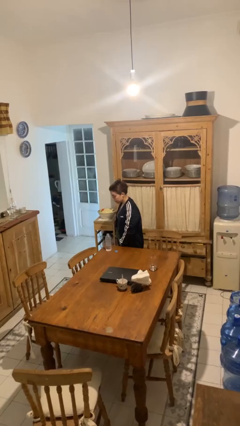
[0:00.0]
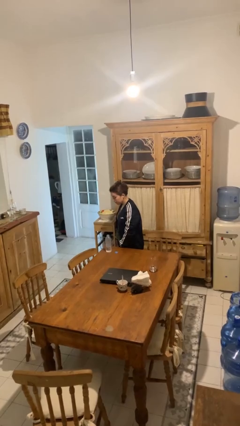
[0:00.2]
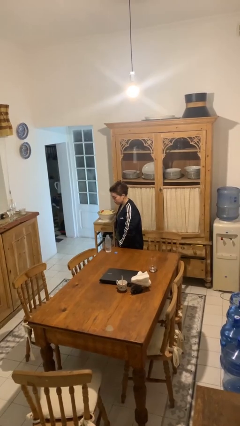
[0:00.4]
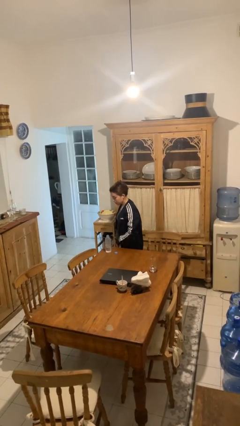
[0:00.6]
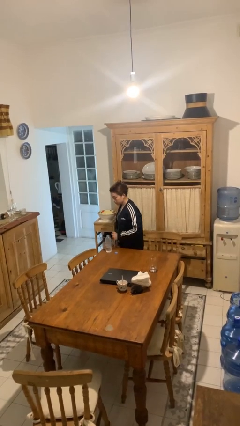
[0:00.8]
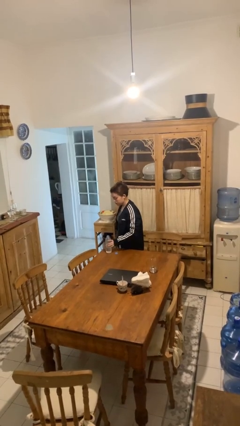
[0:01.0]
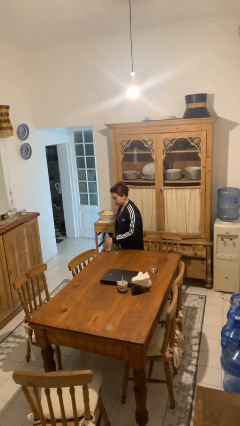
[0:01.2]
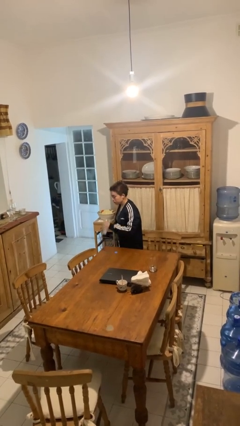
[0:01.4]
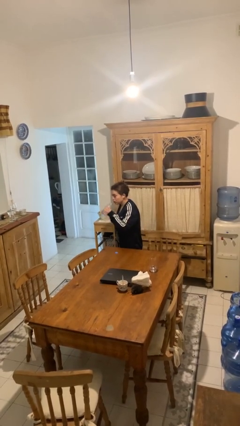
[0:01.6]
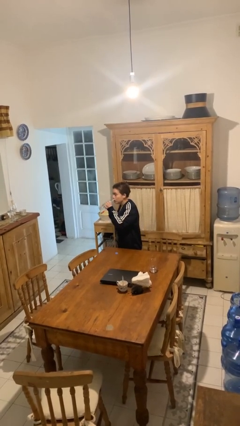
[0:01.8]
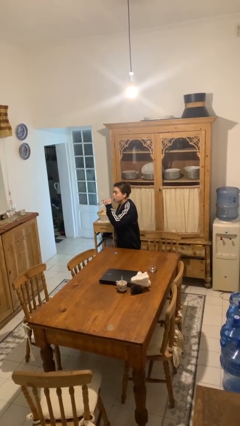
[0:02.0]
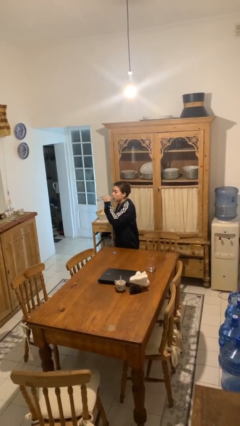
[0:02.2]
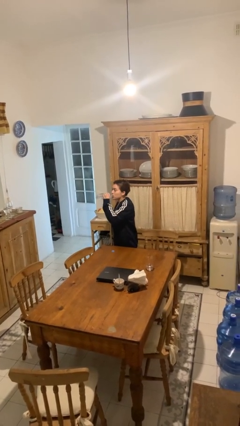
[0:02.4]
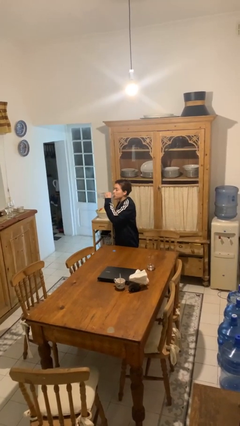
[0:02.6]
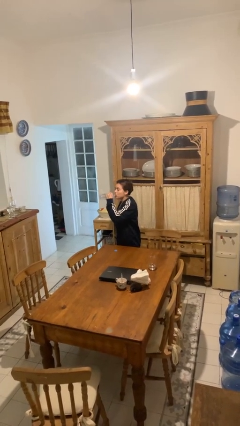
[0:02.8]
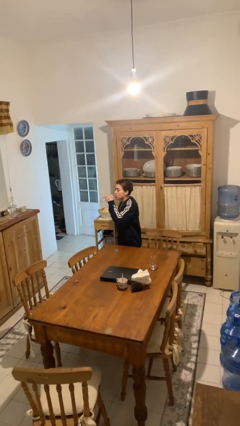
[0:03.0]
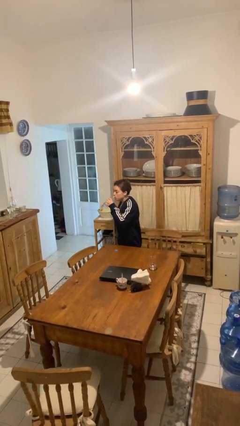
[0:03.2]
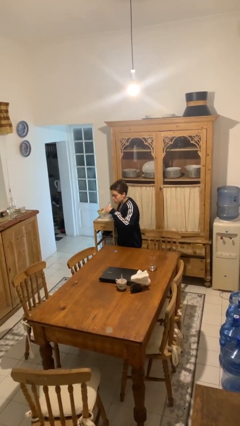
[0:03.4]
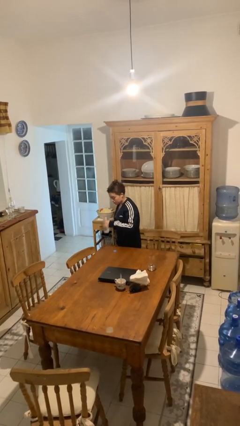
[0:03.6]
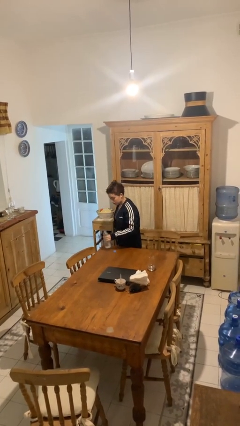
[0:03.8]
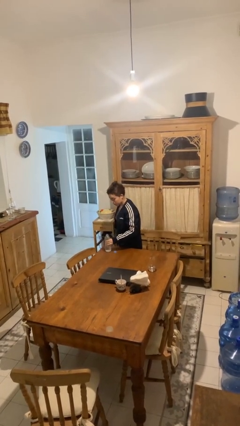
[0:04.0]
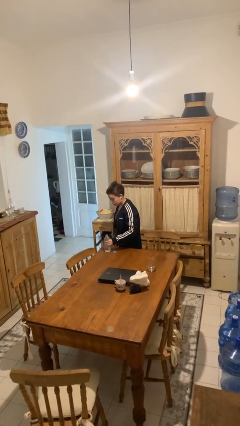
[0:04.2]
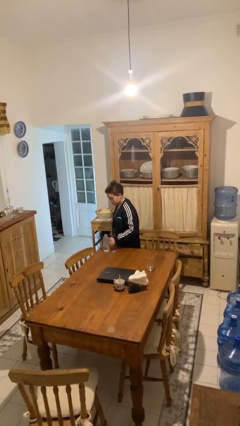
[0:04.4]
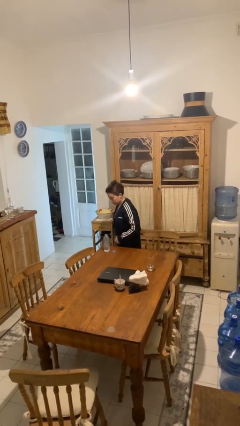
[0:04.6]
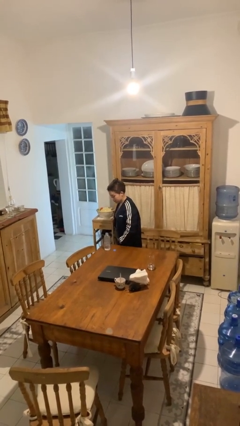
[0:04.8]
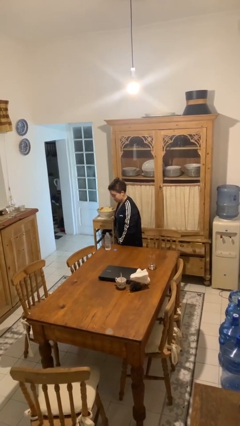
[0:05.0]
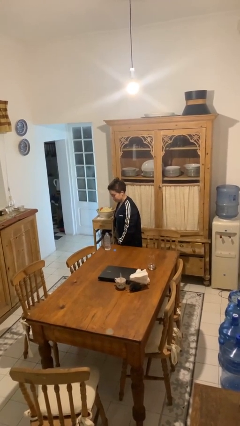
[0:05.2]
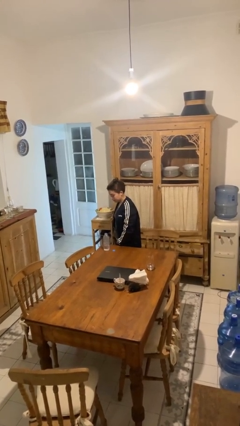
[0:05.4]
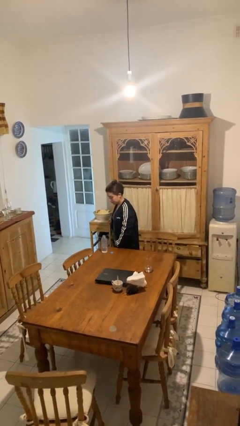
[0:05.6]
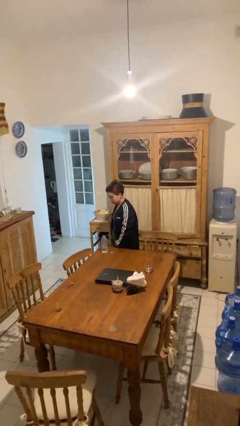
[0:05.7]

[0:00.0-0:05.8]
person drinks from bottle

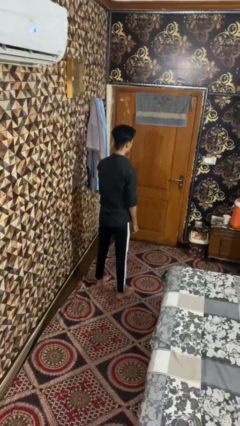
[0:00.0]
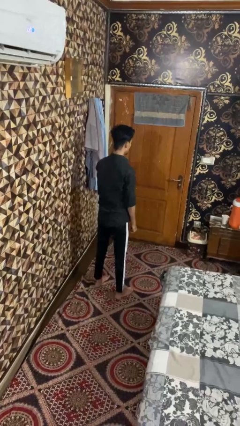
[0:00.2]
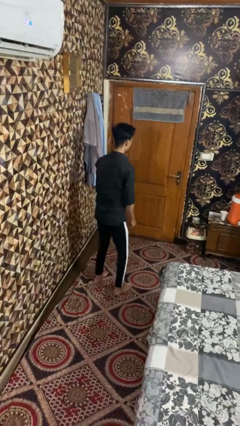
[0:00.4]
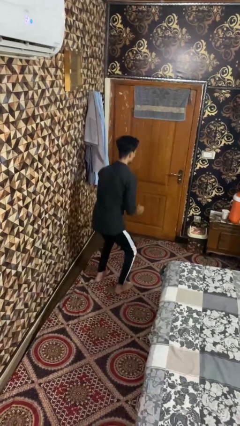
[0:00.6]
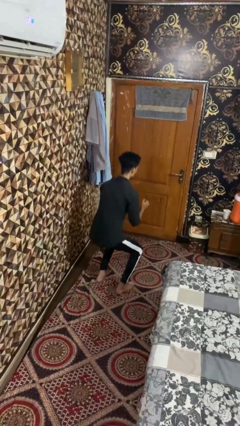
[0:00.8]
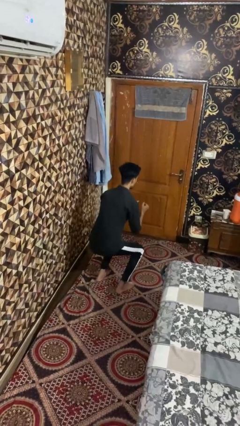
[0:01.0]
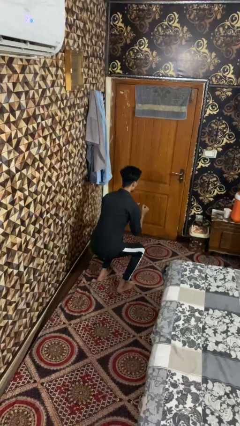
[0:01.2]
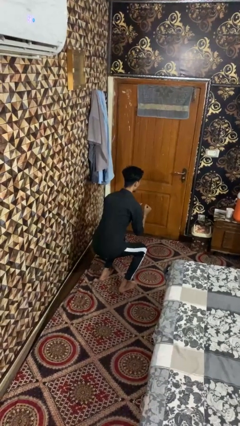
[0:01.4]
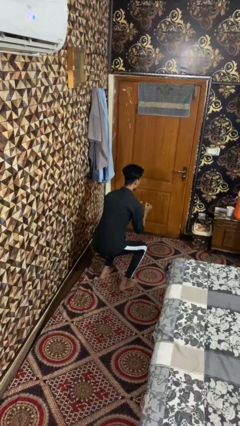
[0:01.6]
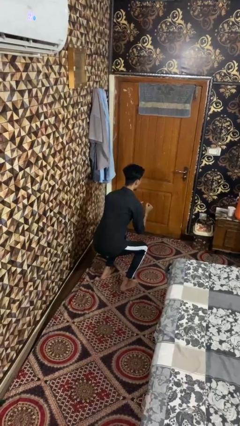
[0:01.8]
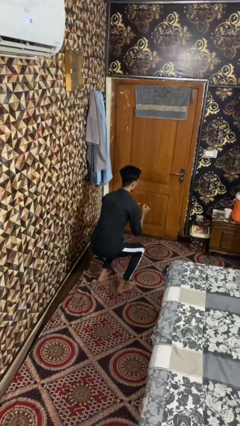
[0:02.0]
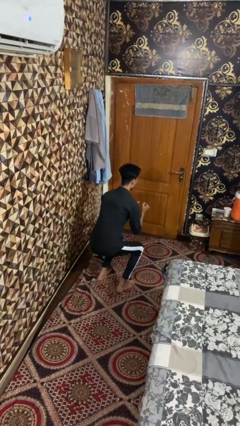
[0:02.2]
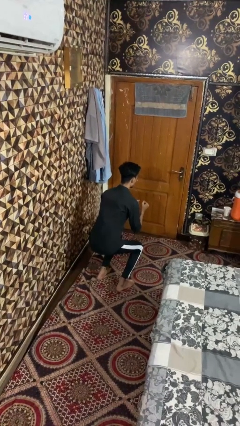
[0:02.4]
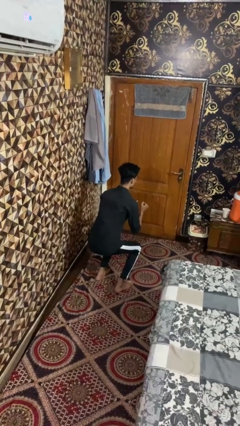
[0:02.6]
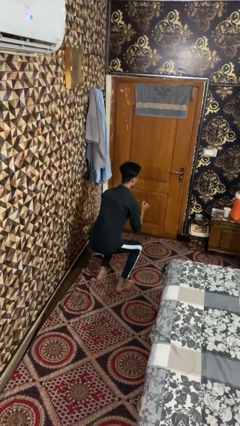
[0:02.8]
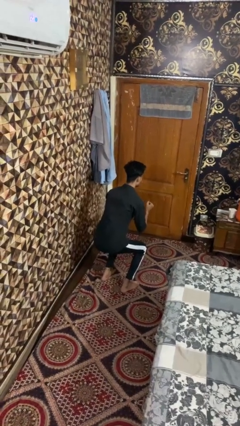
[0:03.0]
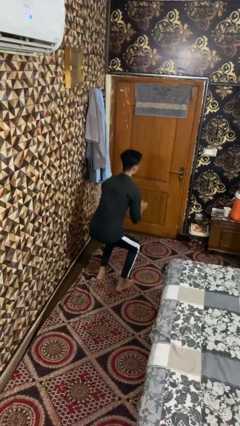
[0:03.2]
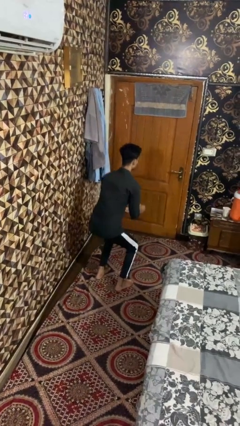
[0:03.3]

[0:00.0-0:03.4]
person squats

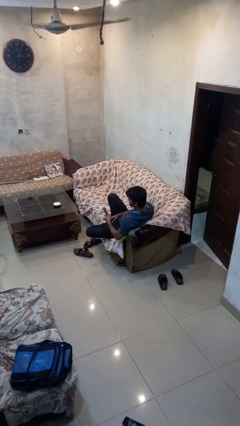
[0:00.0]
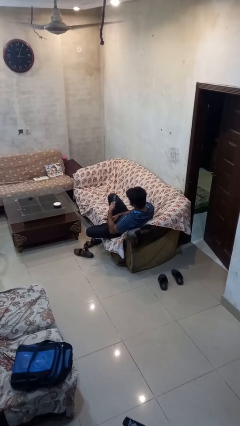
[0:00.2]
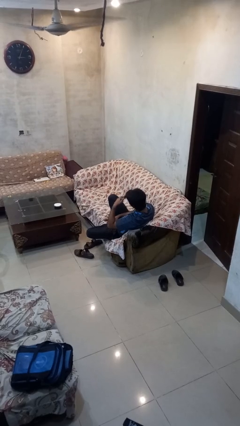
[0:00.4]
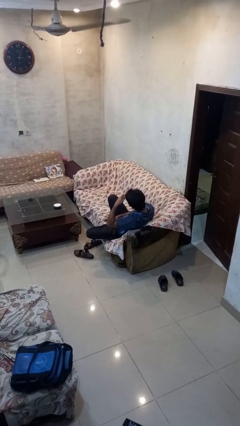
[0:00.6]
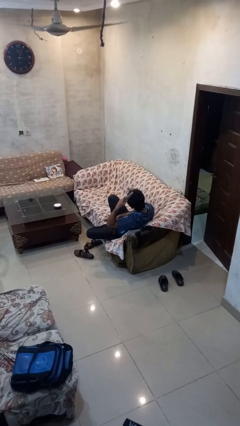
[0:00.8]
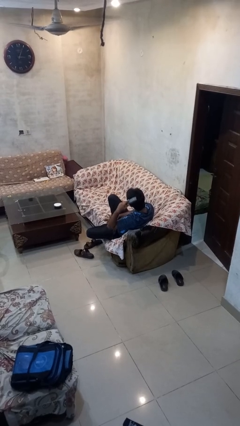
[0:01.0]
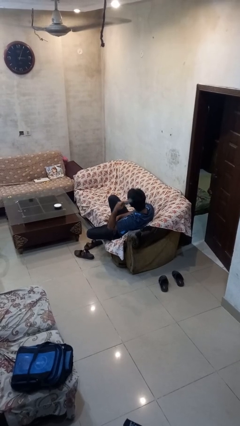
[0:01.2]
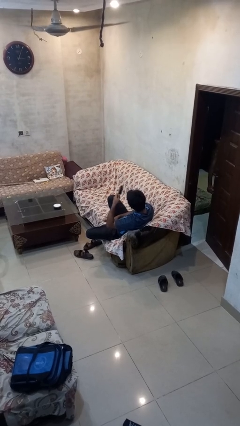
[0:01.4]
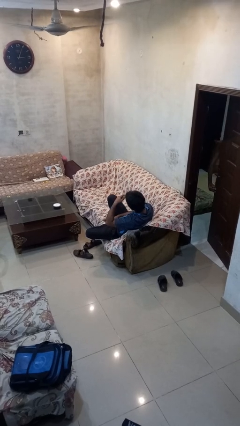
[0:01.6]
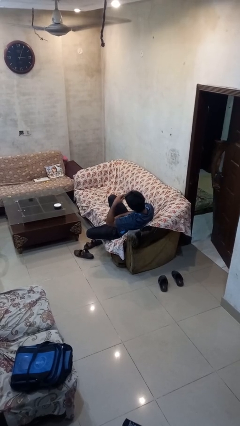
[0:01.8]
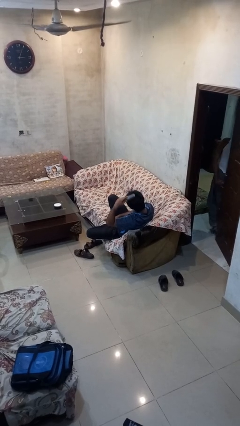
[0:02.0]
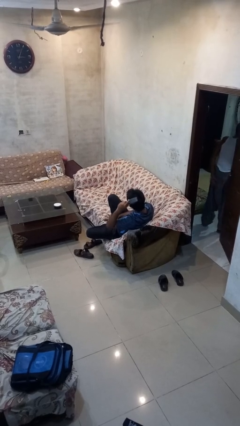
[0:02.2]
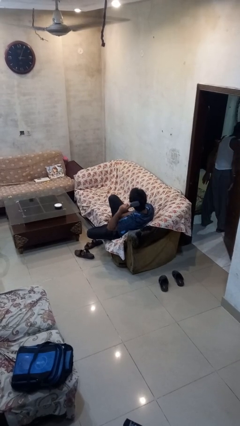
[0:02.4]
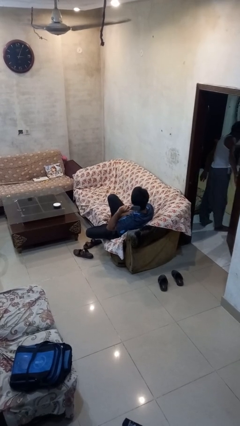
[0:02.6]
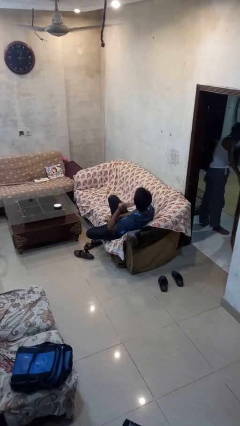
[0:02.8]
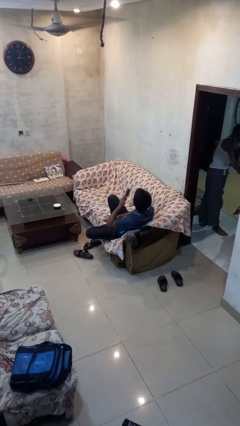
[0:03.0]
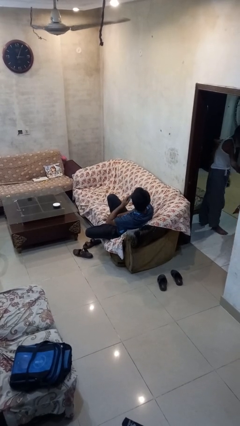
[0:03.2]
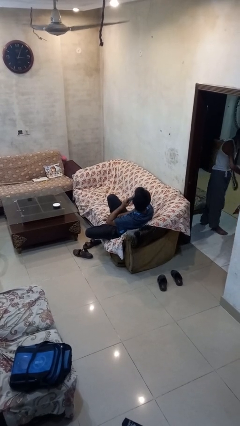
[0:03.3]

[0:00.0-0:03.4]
person brushes hair

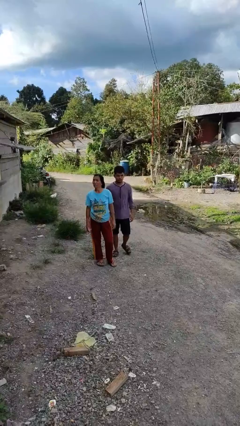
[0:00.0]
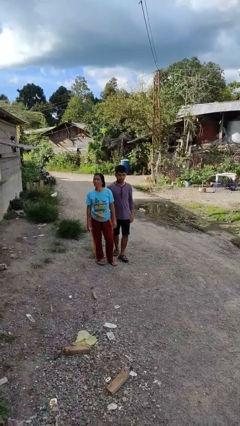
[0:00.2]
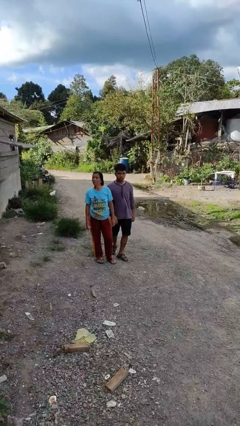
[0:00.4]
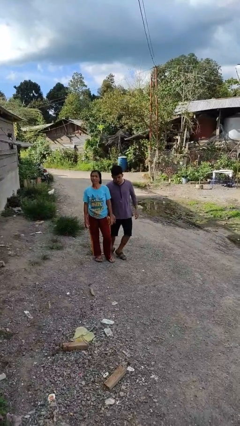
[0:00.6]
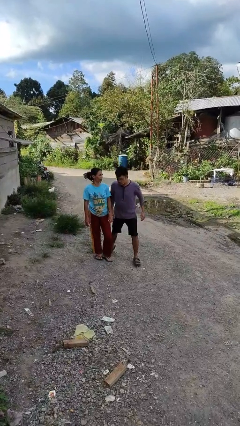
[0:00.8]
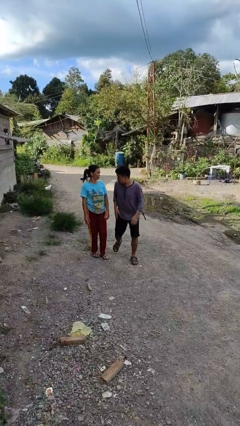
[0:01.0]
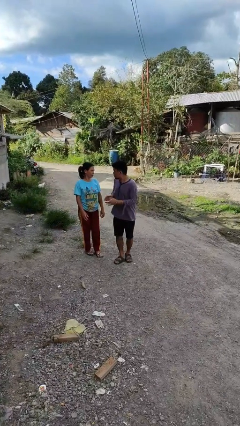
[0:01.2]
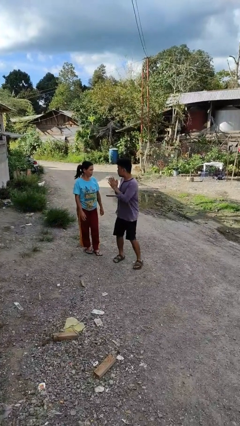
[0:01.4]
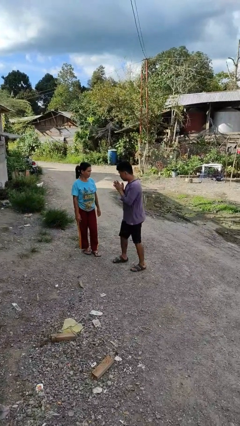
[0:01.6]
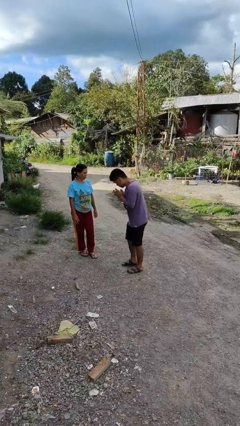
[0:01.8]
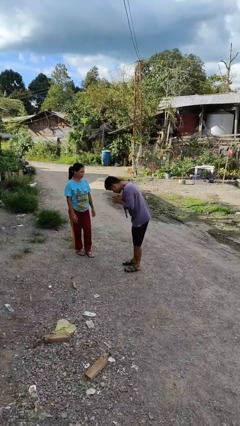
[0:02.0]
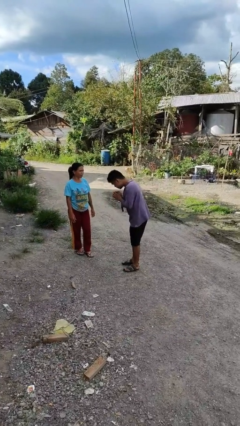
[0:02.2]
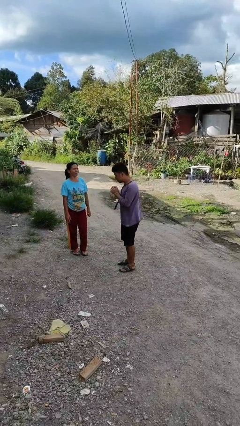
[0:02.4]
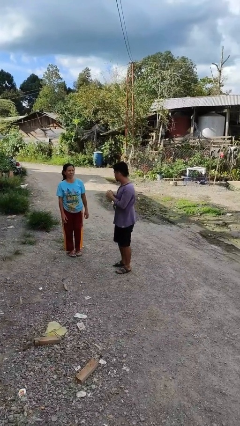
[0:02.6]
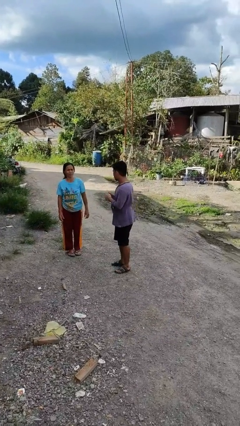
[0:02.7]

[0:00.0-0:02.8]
person bumps into person

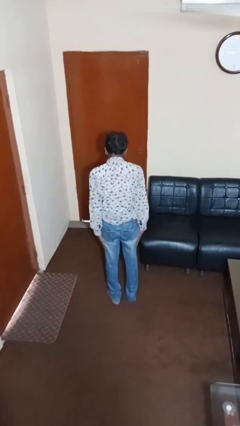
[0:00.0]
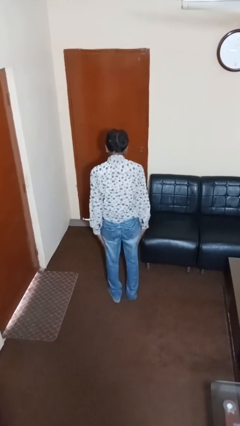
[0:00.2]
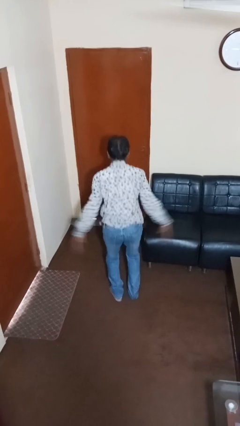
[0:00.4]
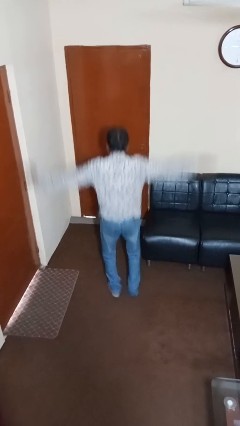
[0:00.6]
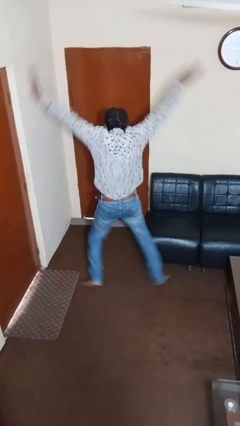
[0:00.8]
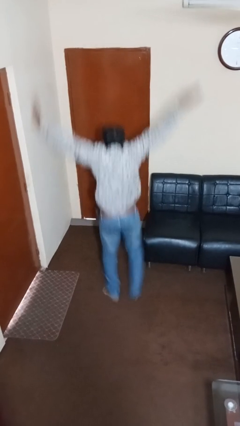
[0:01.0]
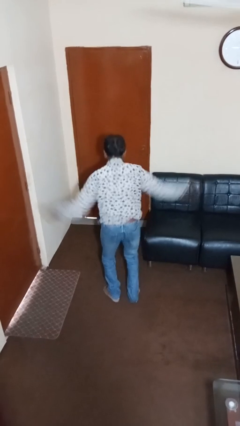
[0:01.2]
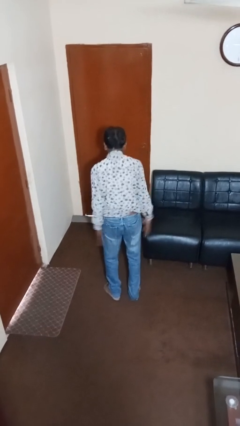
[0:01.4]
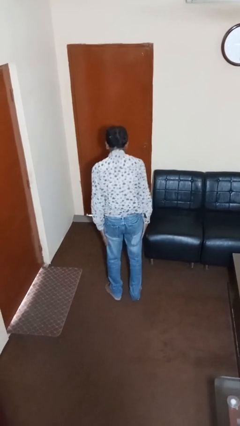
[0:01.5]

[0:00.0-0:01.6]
person exercises with jumping jacks

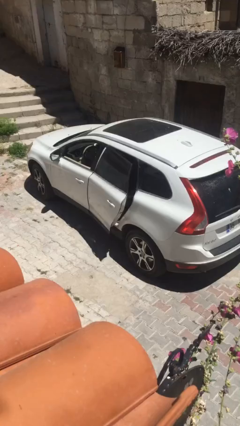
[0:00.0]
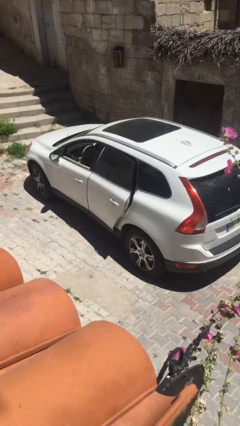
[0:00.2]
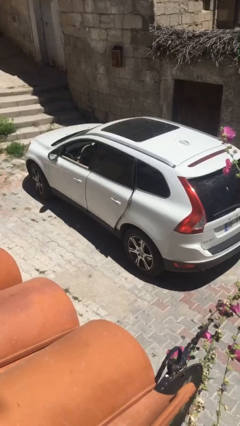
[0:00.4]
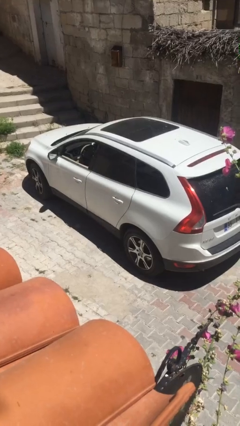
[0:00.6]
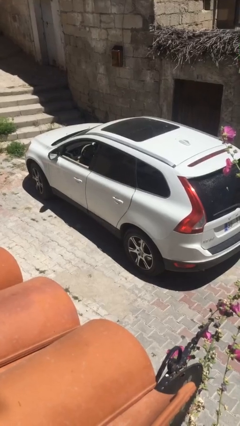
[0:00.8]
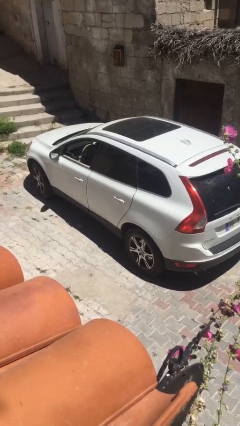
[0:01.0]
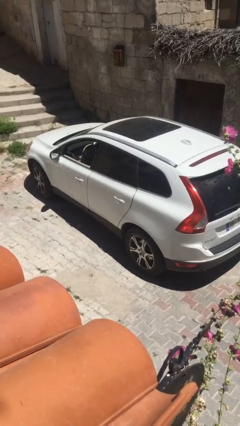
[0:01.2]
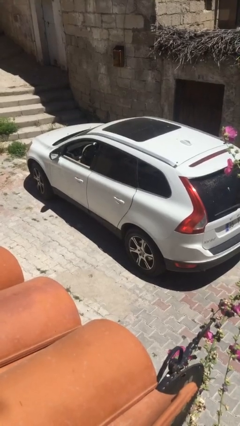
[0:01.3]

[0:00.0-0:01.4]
person closes car door
